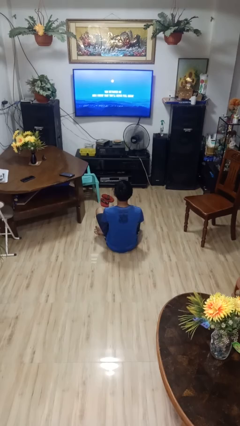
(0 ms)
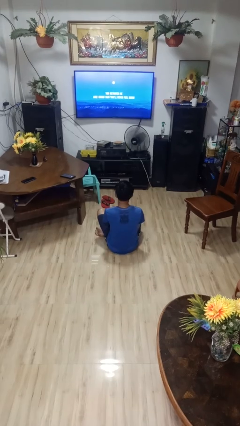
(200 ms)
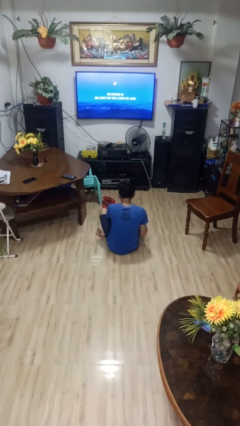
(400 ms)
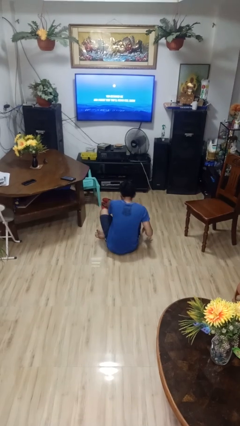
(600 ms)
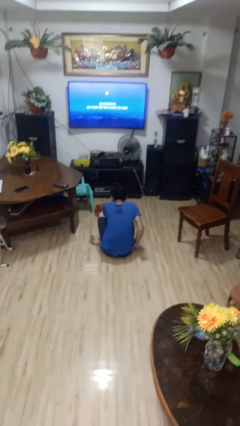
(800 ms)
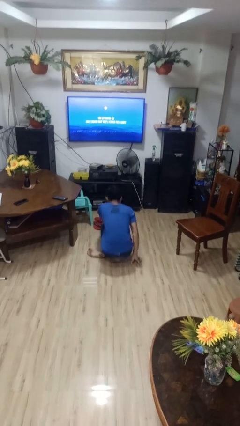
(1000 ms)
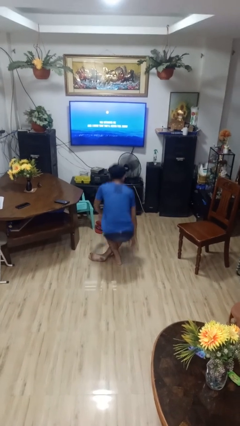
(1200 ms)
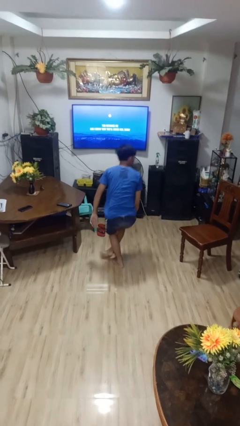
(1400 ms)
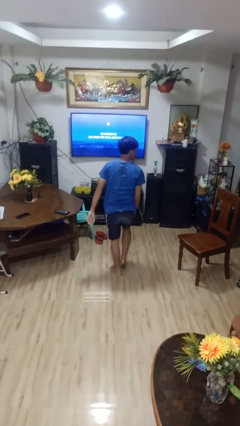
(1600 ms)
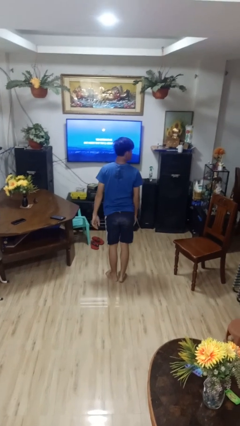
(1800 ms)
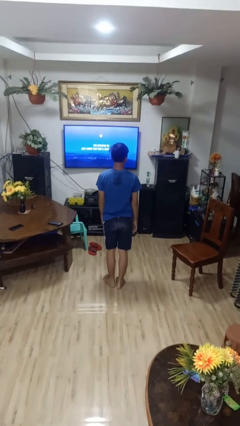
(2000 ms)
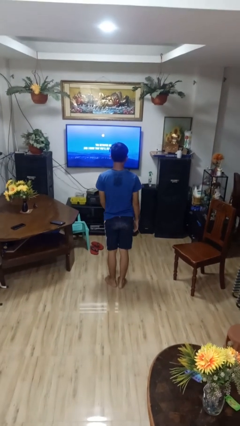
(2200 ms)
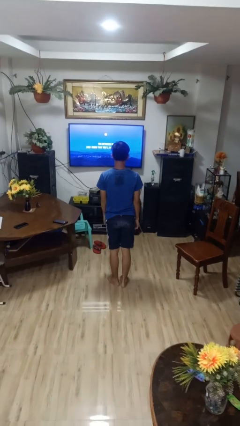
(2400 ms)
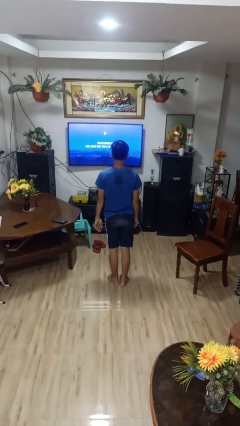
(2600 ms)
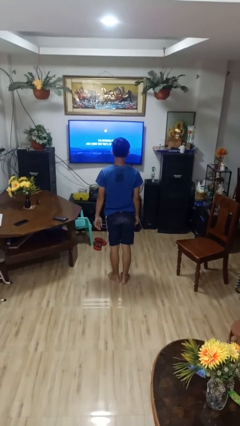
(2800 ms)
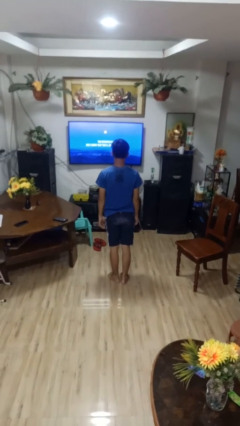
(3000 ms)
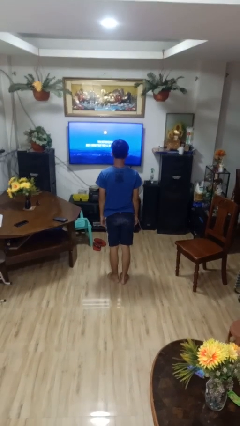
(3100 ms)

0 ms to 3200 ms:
person stands up from floor

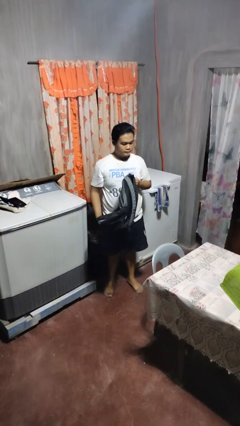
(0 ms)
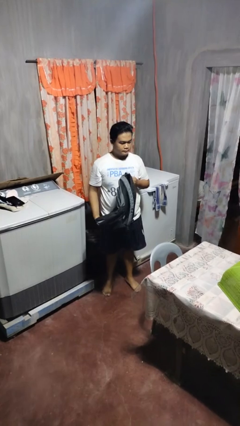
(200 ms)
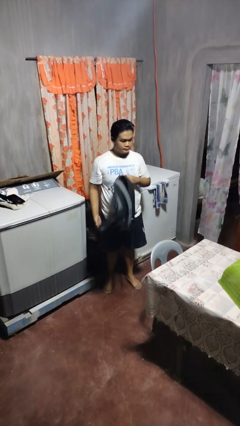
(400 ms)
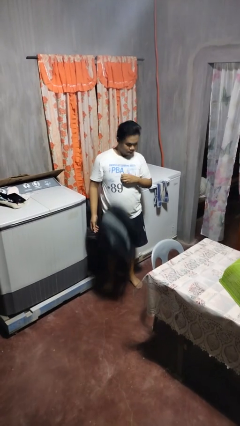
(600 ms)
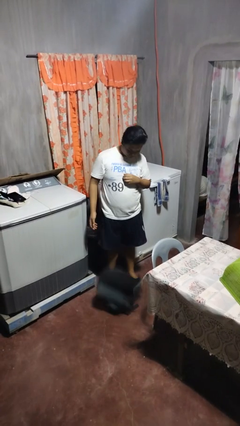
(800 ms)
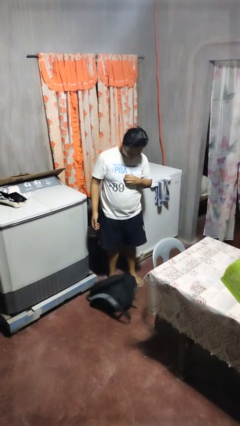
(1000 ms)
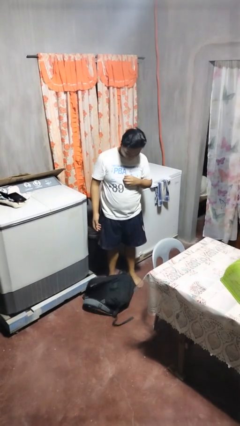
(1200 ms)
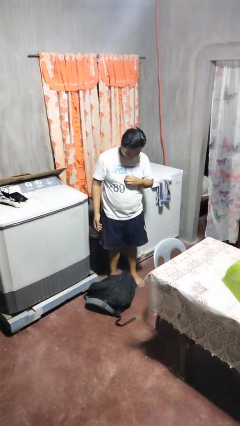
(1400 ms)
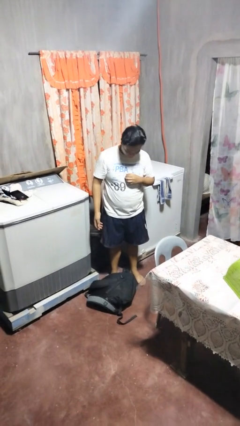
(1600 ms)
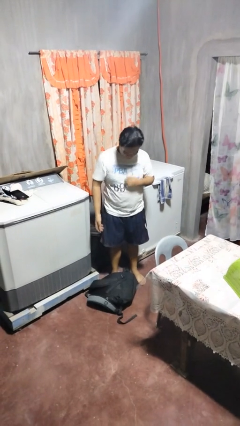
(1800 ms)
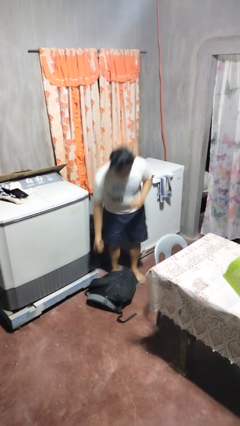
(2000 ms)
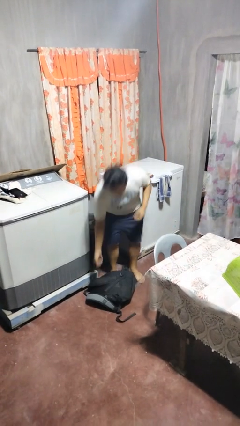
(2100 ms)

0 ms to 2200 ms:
person drops object

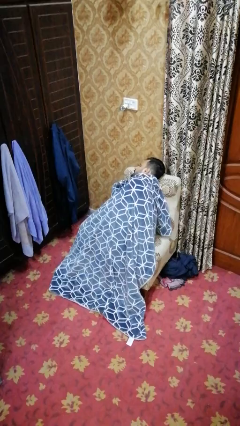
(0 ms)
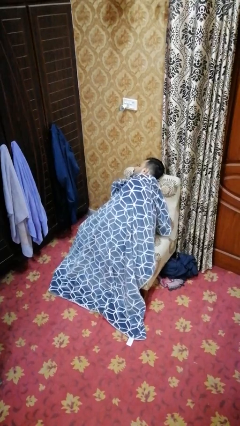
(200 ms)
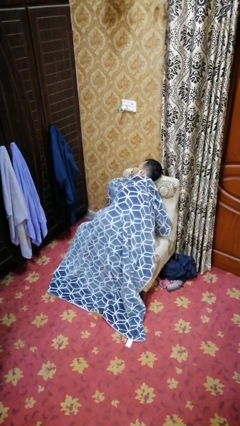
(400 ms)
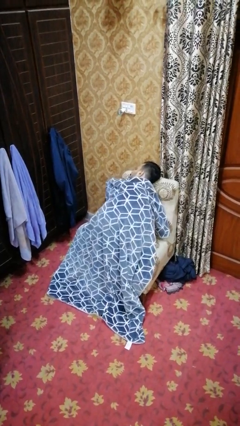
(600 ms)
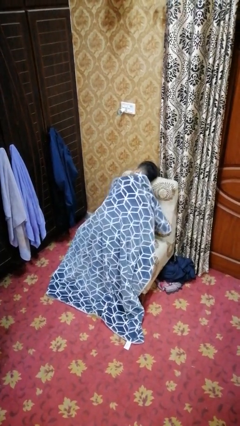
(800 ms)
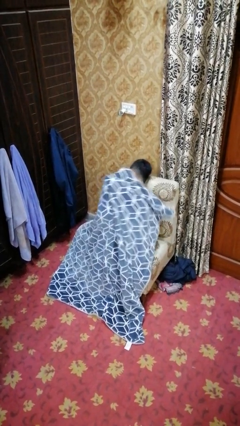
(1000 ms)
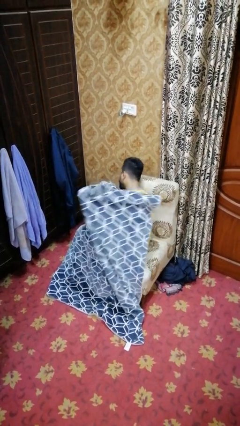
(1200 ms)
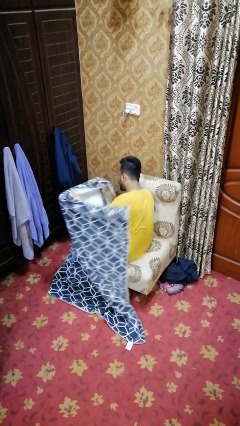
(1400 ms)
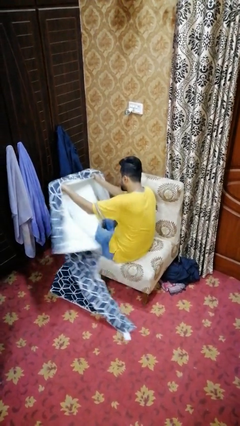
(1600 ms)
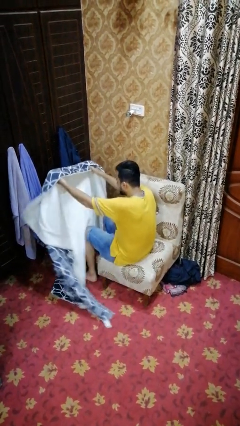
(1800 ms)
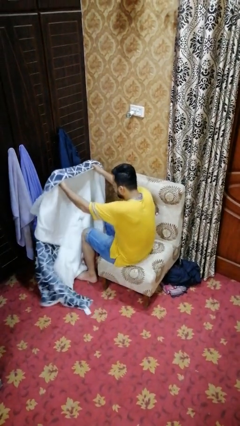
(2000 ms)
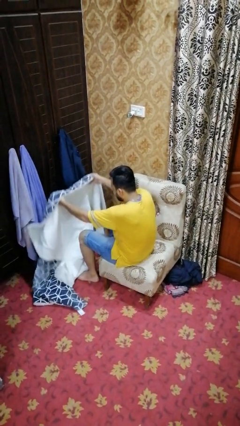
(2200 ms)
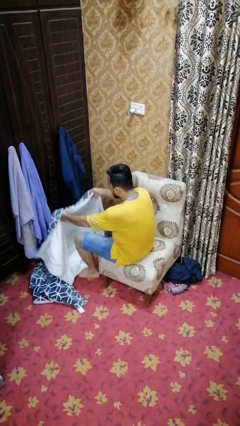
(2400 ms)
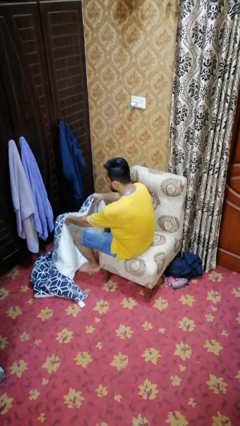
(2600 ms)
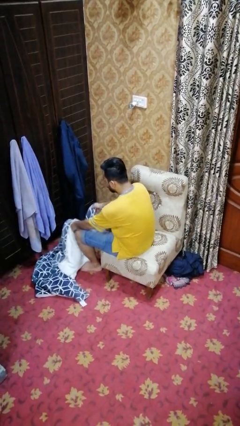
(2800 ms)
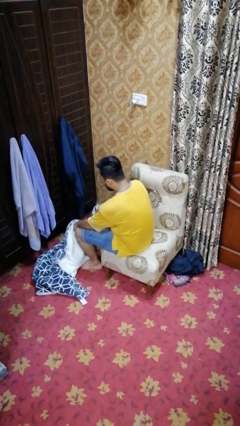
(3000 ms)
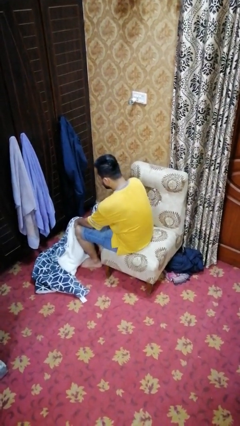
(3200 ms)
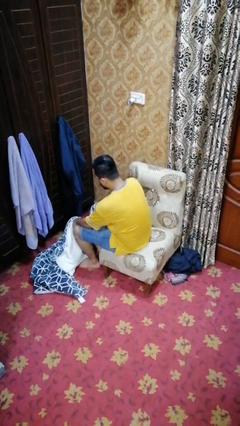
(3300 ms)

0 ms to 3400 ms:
person uncovers with blanket

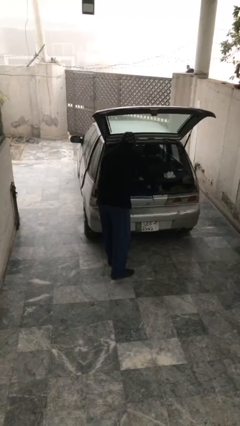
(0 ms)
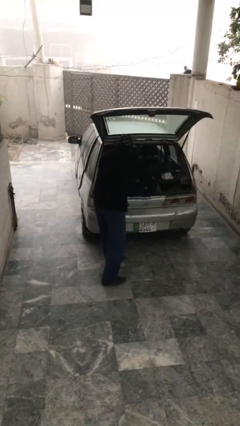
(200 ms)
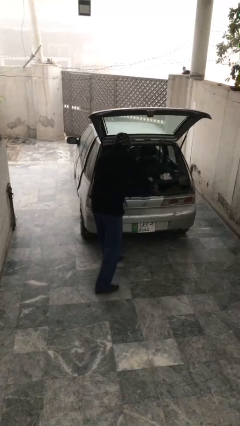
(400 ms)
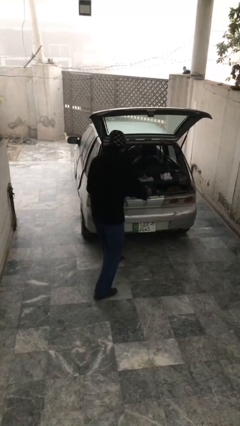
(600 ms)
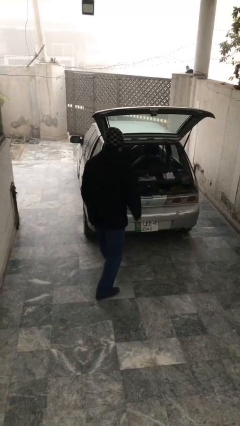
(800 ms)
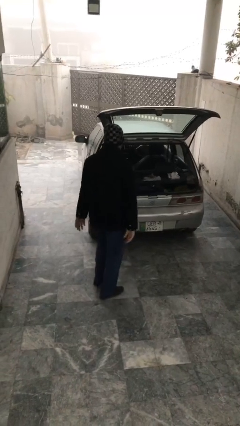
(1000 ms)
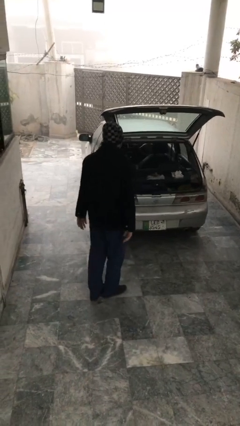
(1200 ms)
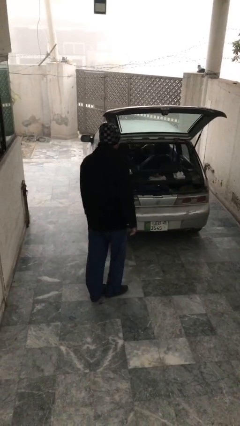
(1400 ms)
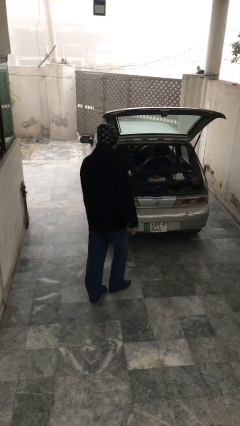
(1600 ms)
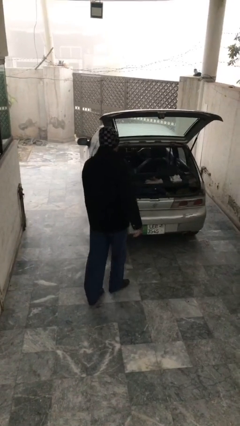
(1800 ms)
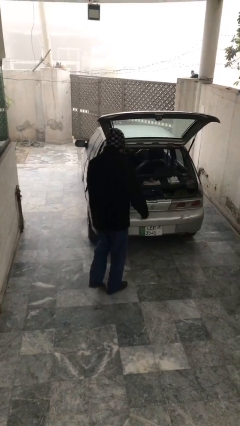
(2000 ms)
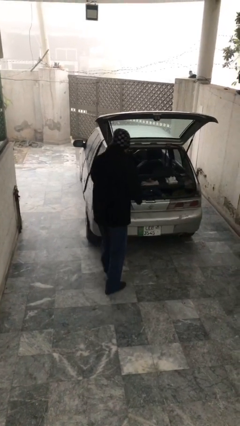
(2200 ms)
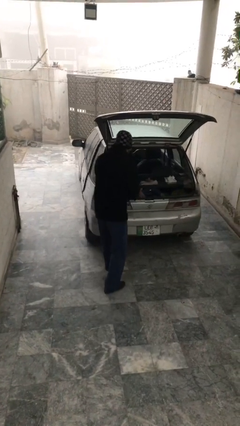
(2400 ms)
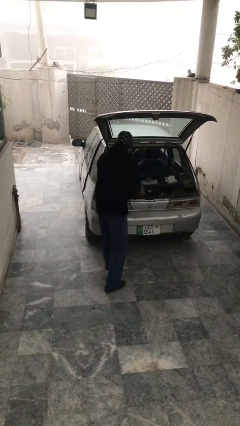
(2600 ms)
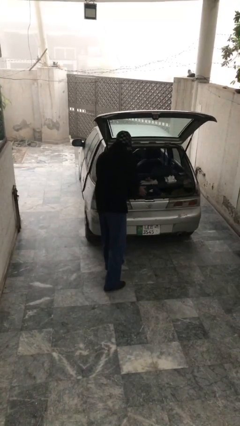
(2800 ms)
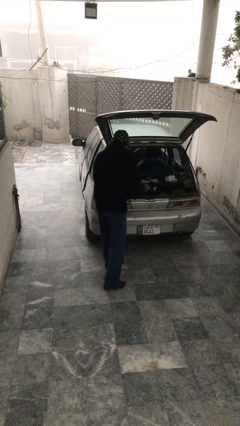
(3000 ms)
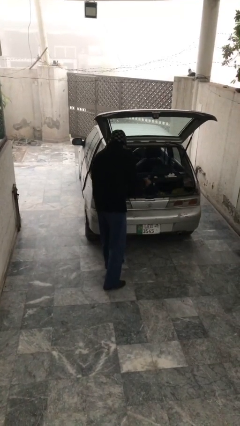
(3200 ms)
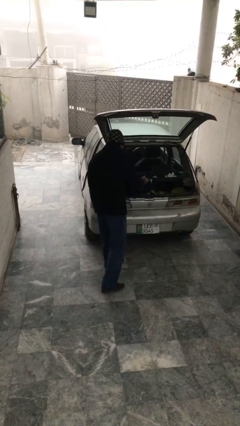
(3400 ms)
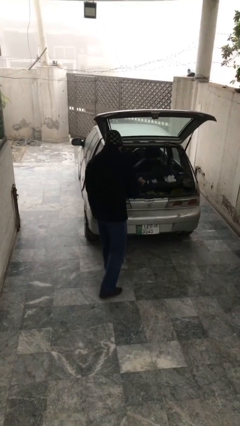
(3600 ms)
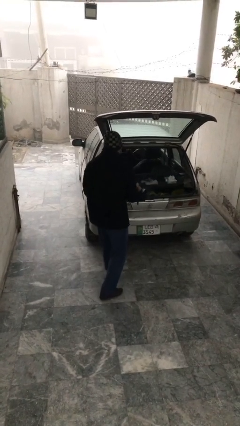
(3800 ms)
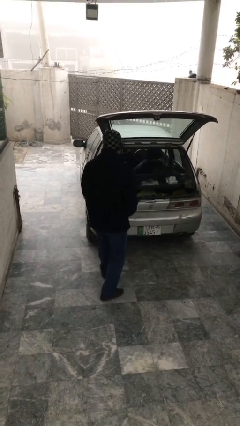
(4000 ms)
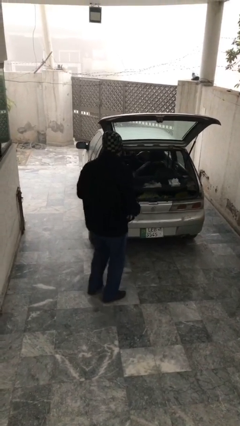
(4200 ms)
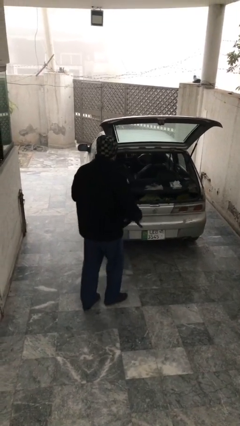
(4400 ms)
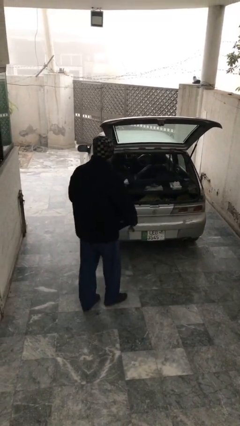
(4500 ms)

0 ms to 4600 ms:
person unloads car

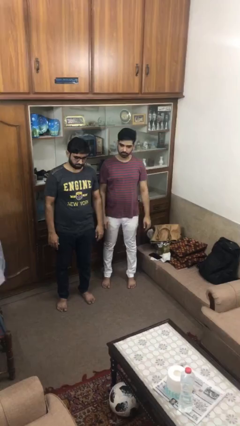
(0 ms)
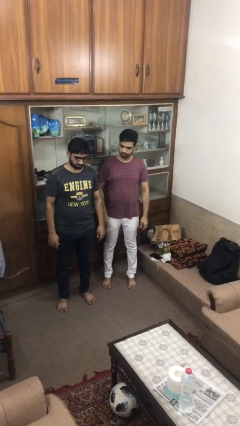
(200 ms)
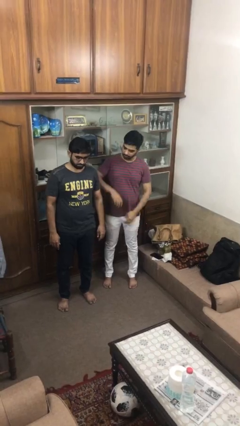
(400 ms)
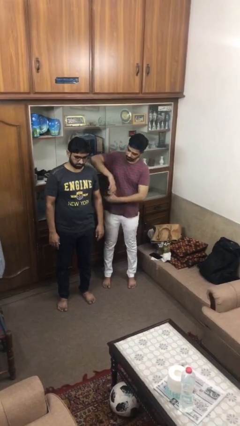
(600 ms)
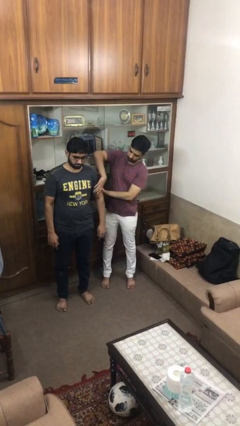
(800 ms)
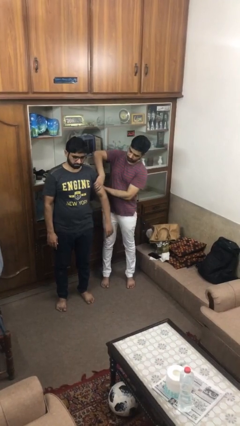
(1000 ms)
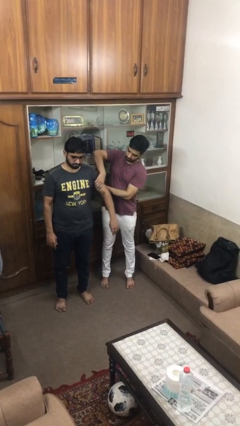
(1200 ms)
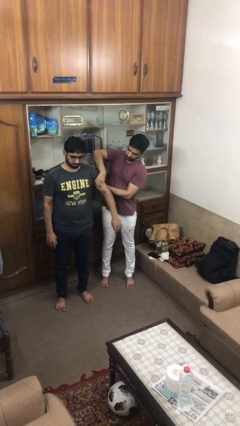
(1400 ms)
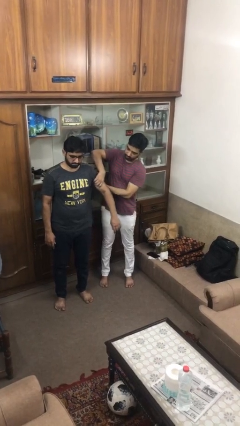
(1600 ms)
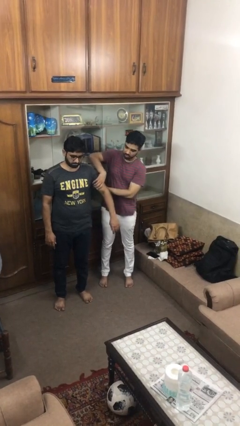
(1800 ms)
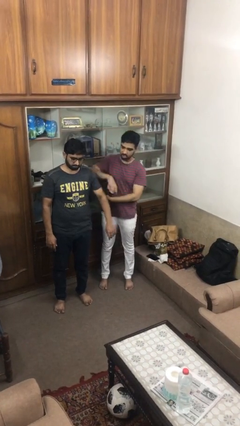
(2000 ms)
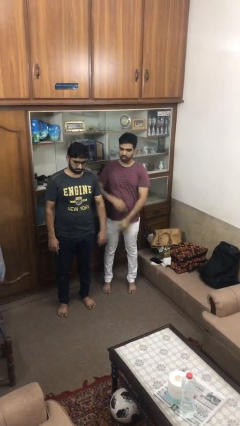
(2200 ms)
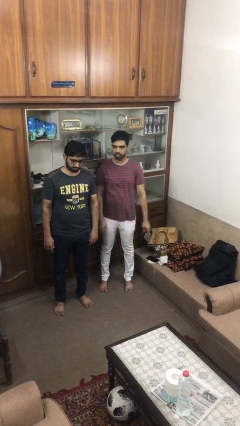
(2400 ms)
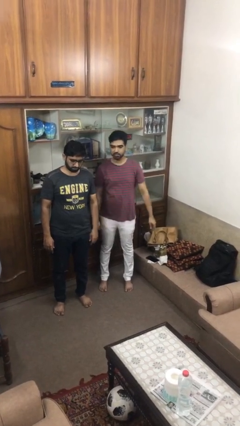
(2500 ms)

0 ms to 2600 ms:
person grabs person by bicep

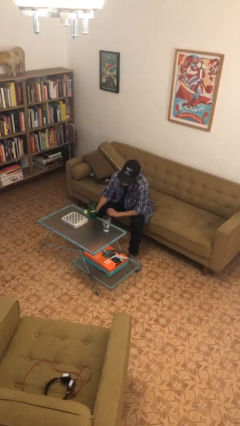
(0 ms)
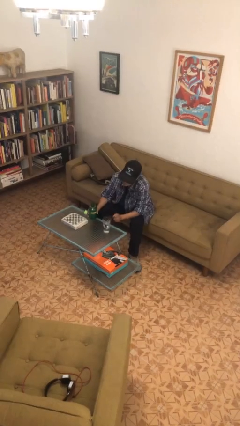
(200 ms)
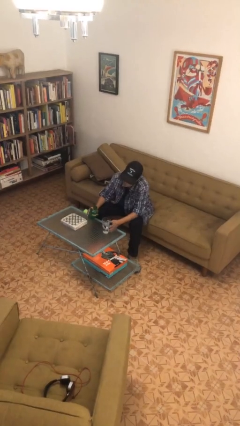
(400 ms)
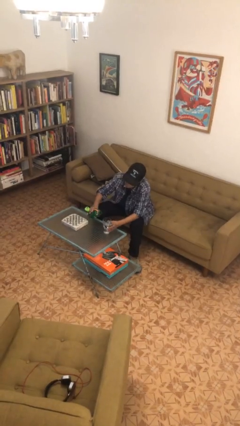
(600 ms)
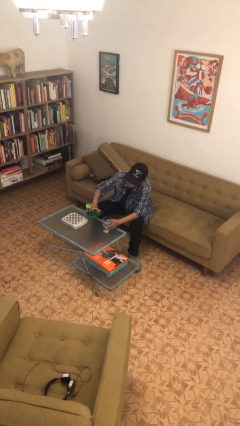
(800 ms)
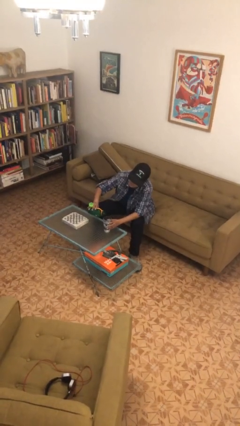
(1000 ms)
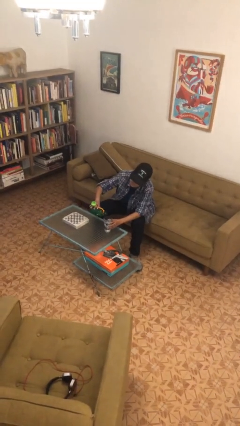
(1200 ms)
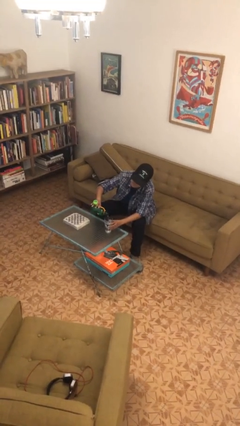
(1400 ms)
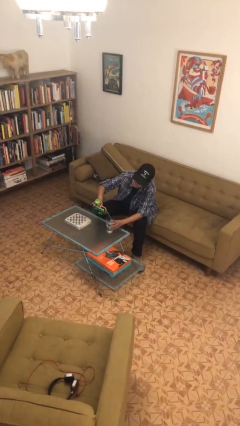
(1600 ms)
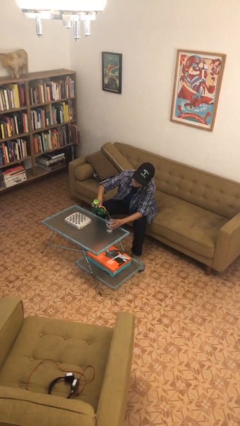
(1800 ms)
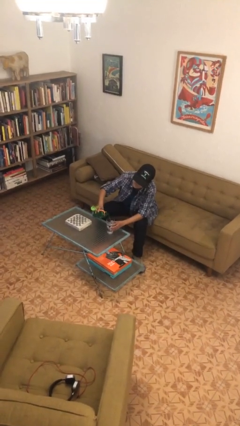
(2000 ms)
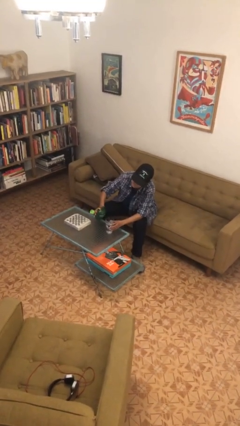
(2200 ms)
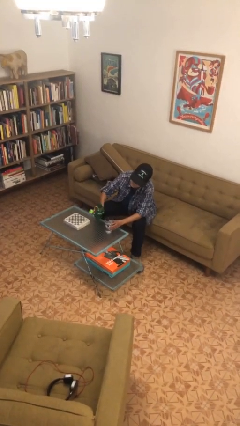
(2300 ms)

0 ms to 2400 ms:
person pours liquid into cup
